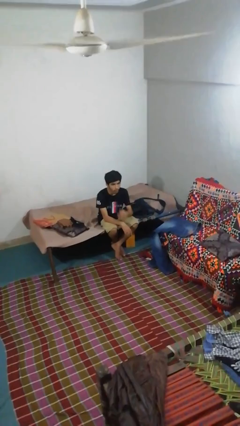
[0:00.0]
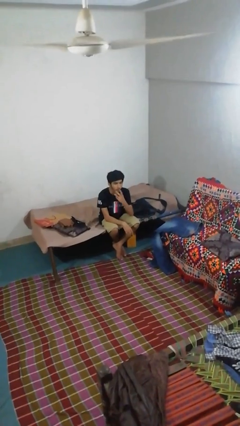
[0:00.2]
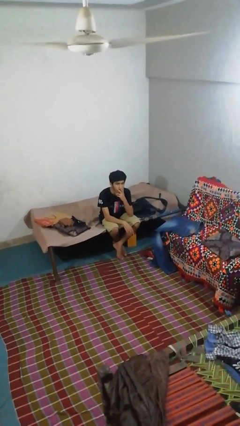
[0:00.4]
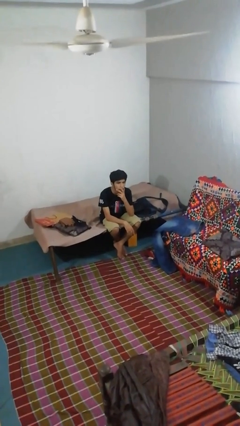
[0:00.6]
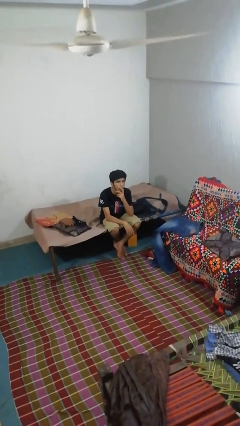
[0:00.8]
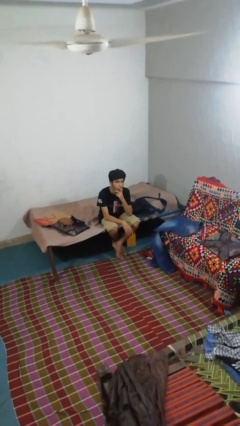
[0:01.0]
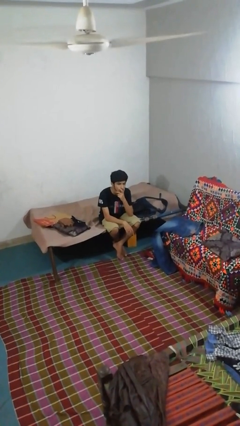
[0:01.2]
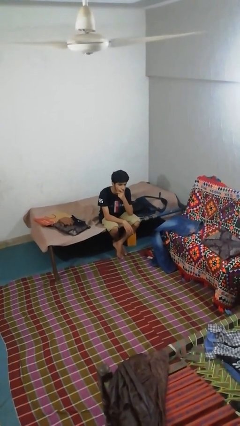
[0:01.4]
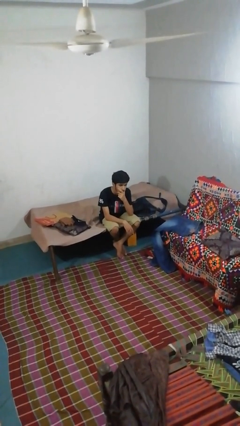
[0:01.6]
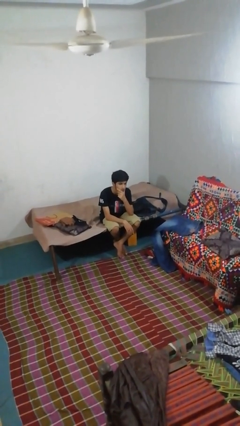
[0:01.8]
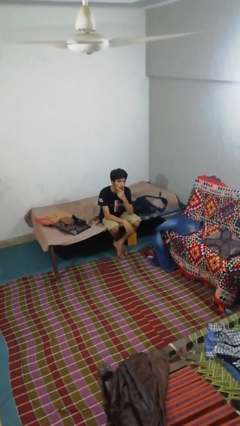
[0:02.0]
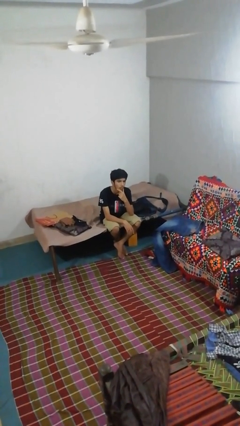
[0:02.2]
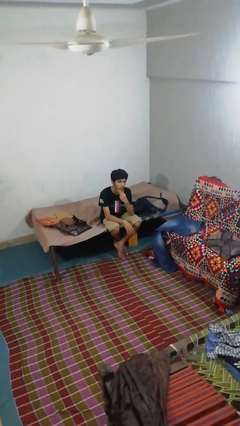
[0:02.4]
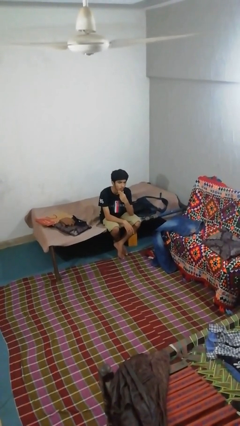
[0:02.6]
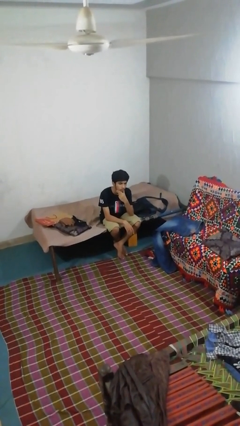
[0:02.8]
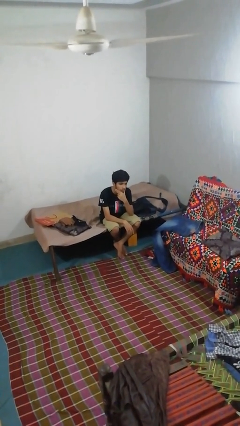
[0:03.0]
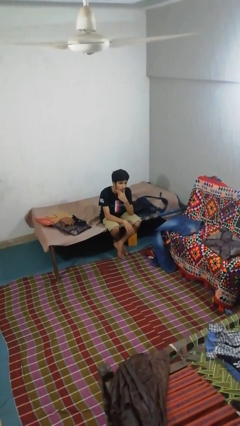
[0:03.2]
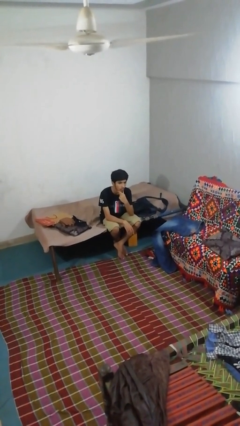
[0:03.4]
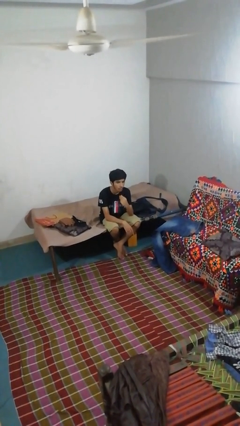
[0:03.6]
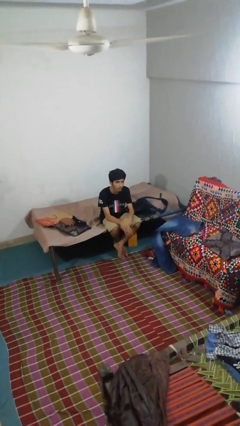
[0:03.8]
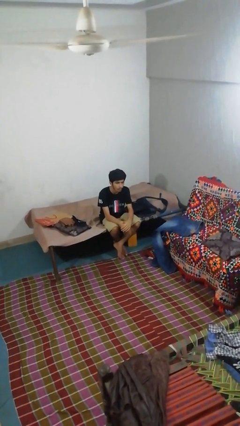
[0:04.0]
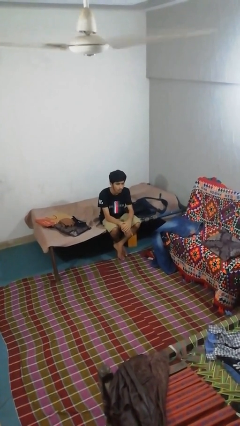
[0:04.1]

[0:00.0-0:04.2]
person strokes chin

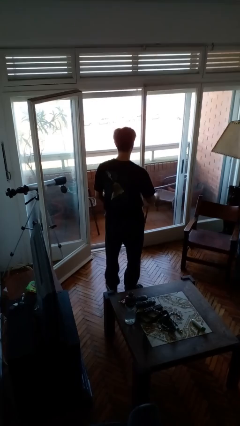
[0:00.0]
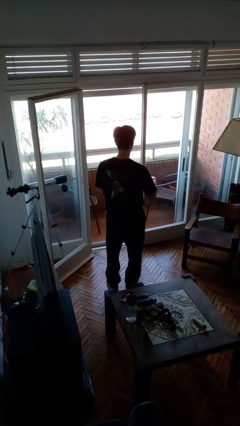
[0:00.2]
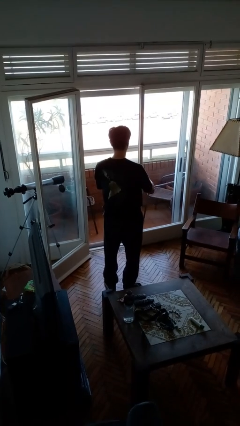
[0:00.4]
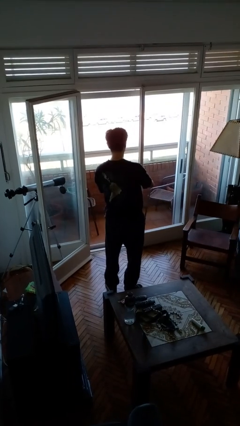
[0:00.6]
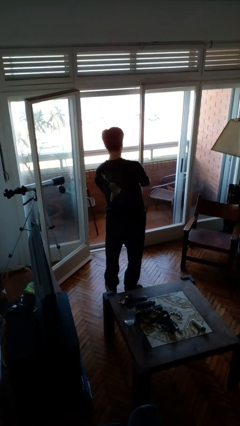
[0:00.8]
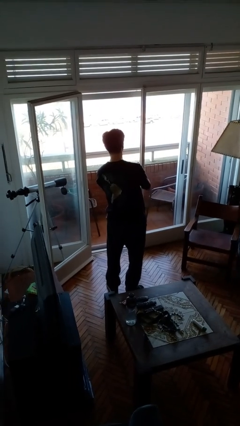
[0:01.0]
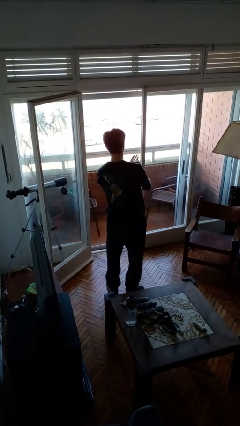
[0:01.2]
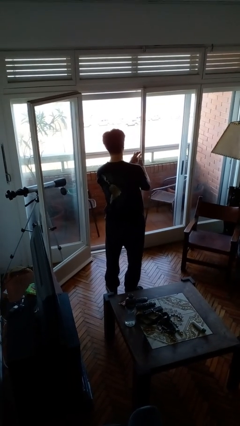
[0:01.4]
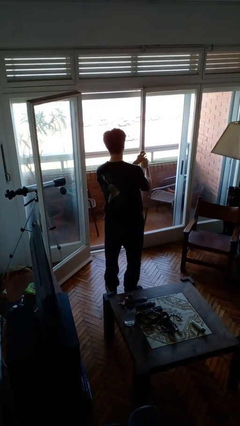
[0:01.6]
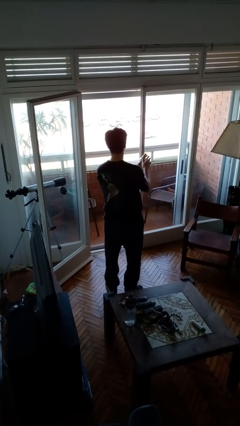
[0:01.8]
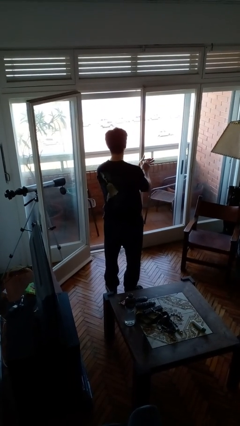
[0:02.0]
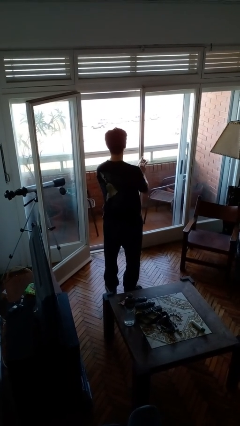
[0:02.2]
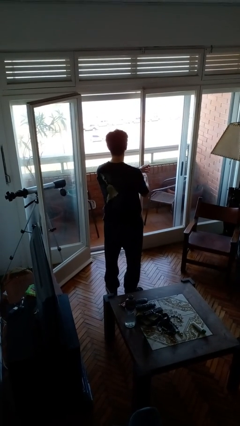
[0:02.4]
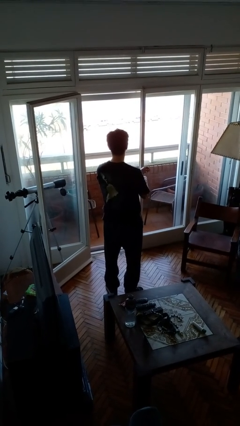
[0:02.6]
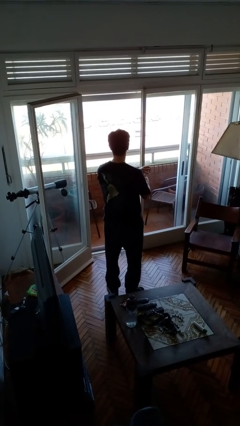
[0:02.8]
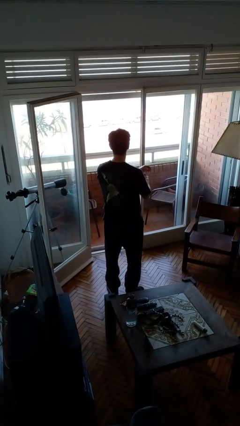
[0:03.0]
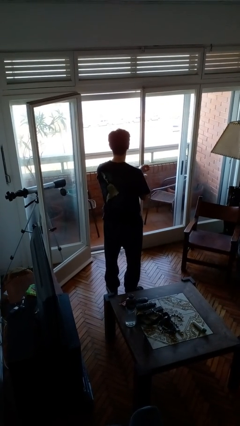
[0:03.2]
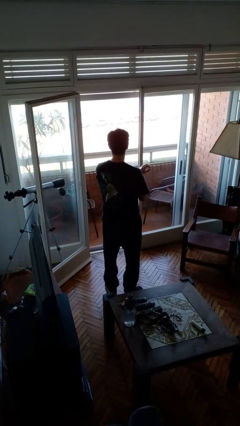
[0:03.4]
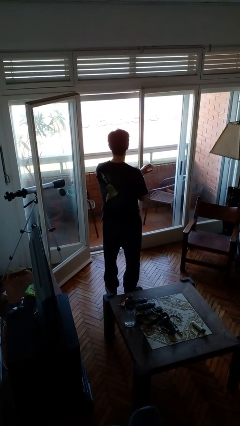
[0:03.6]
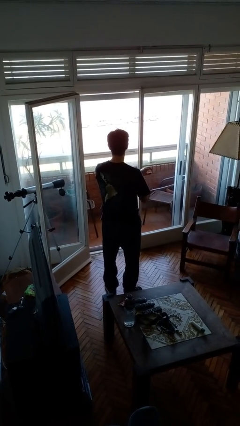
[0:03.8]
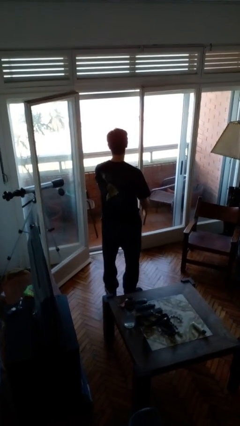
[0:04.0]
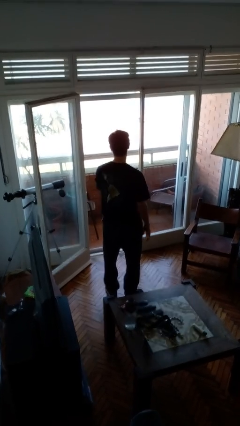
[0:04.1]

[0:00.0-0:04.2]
person puts on wristwatch

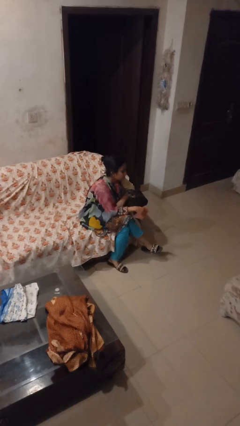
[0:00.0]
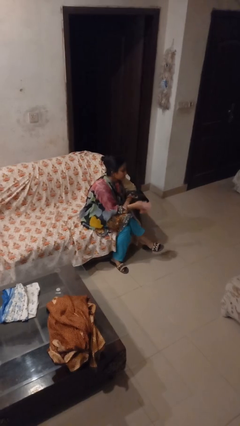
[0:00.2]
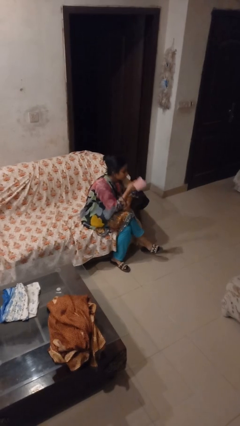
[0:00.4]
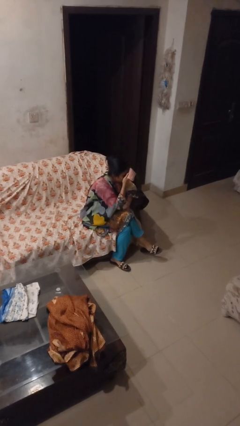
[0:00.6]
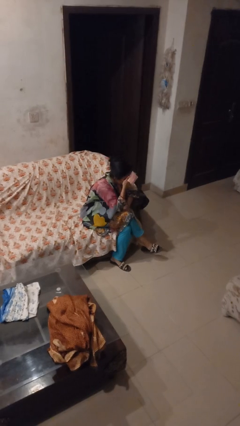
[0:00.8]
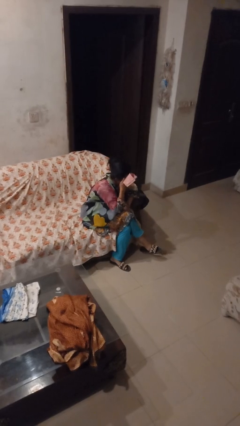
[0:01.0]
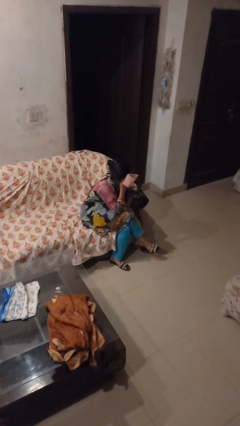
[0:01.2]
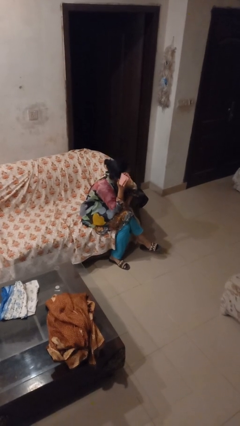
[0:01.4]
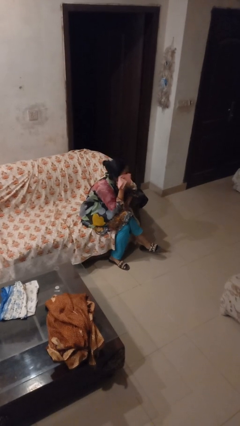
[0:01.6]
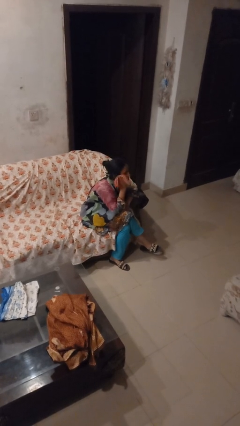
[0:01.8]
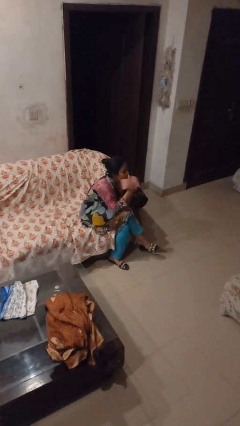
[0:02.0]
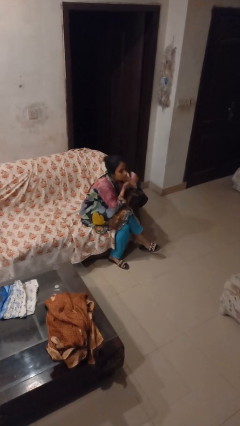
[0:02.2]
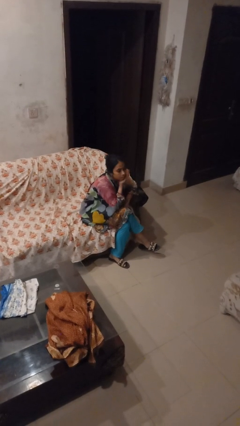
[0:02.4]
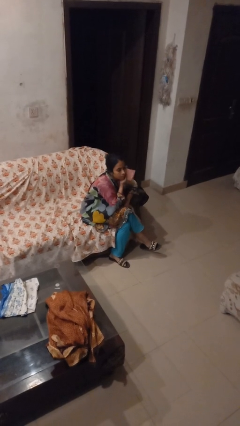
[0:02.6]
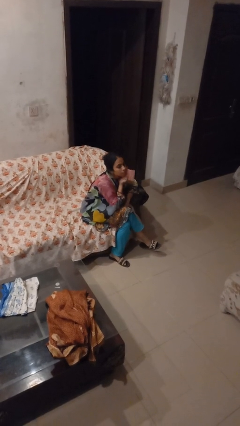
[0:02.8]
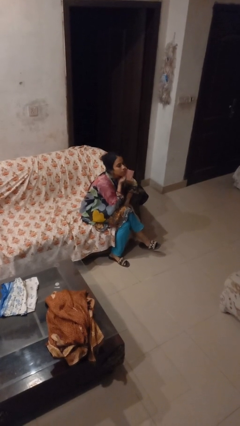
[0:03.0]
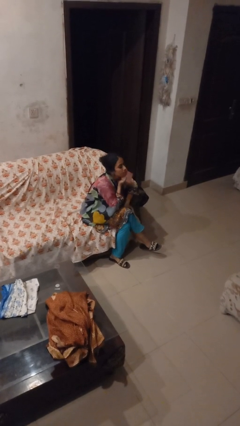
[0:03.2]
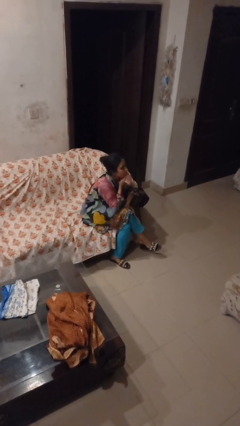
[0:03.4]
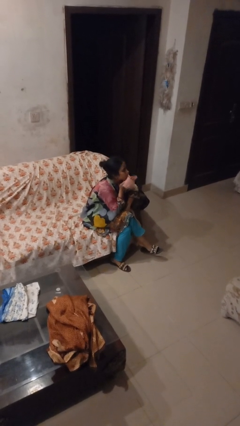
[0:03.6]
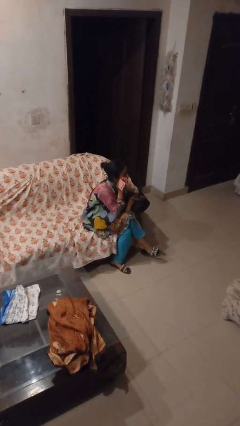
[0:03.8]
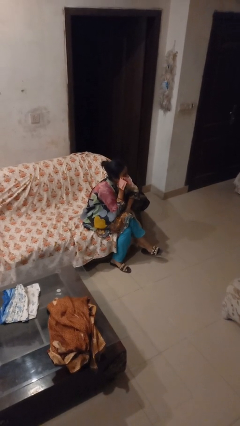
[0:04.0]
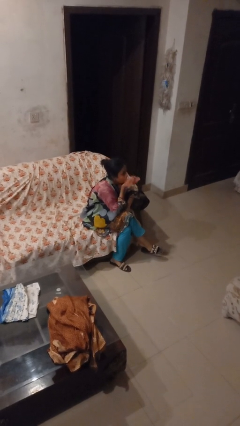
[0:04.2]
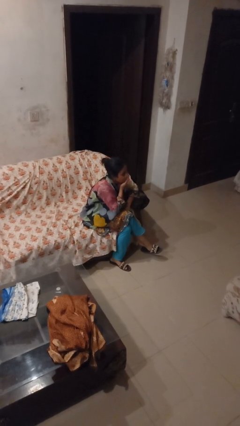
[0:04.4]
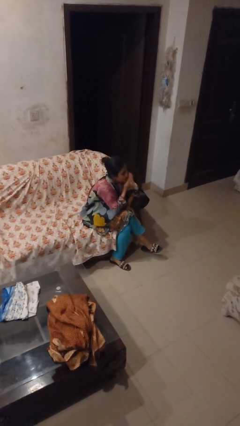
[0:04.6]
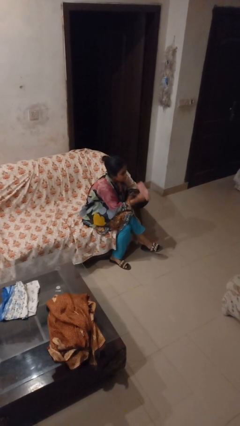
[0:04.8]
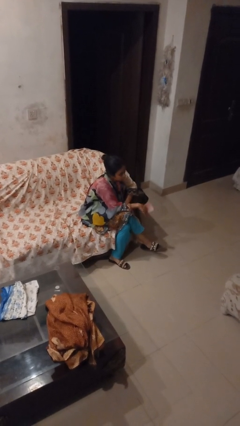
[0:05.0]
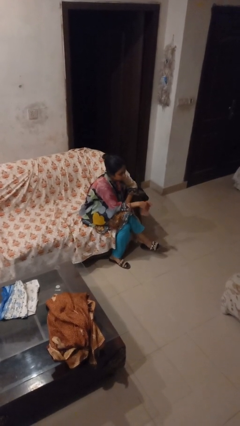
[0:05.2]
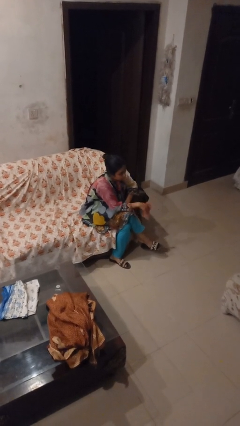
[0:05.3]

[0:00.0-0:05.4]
person wipes mouth with napkin

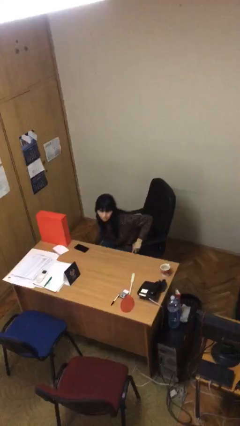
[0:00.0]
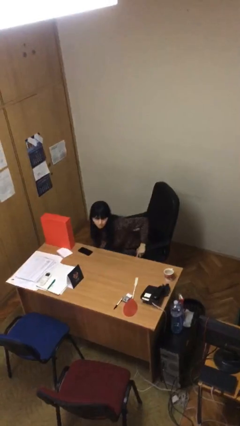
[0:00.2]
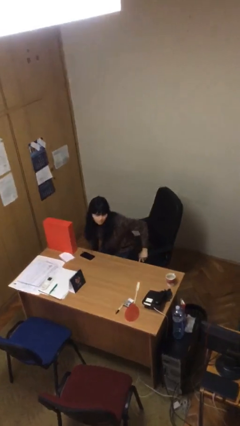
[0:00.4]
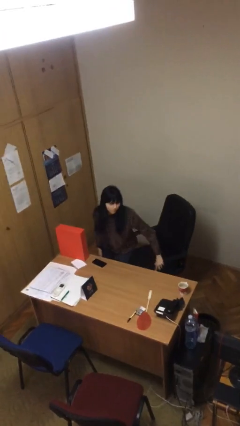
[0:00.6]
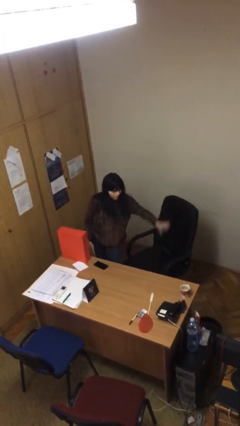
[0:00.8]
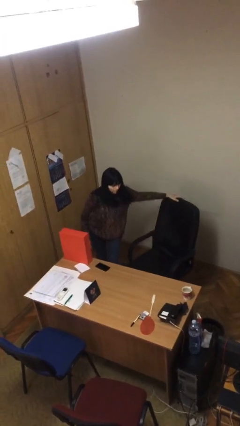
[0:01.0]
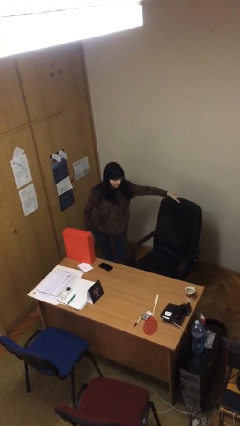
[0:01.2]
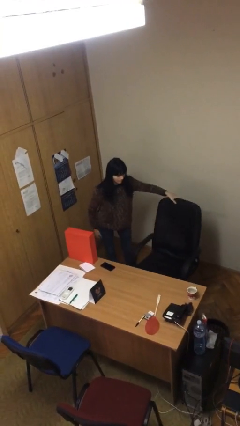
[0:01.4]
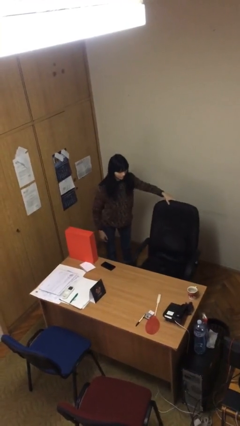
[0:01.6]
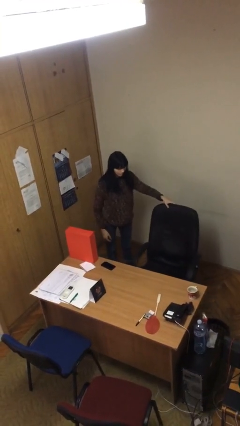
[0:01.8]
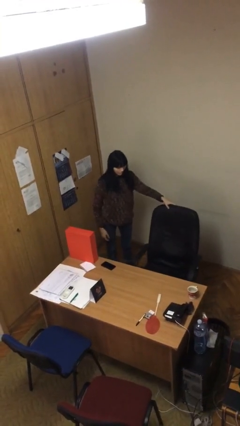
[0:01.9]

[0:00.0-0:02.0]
person stands up

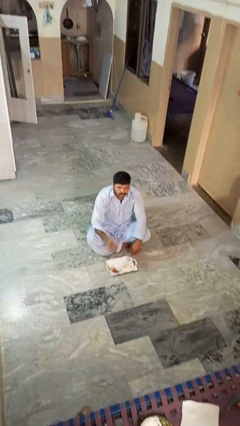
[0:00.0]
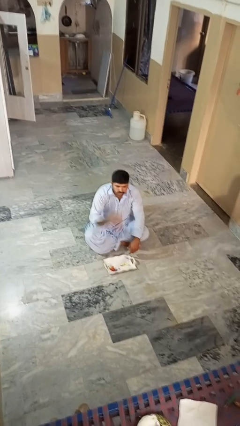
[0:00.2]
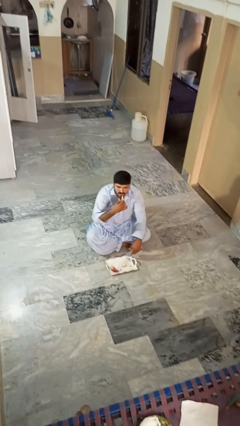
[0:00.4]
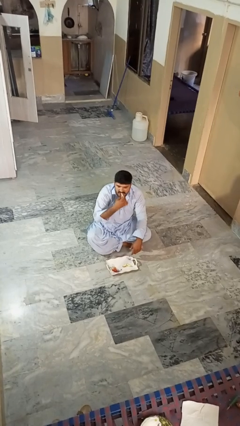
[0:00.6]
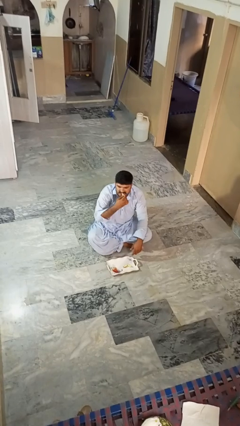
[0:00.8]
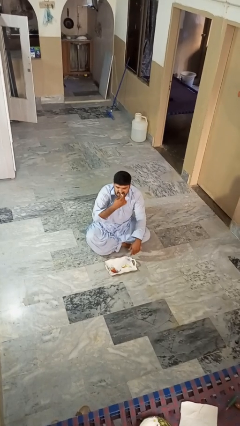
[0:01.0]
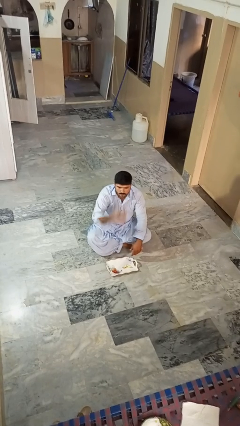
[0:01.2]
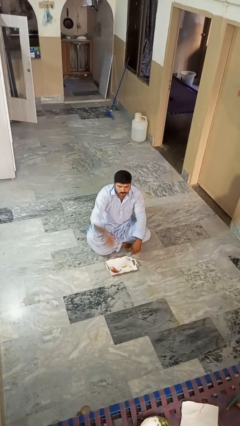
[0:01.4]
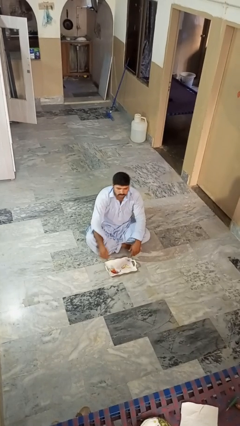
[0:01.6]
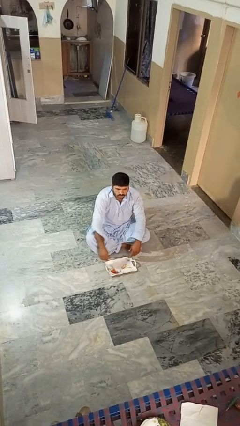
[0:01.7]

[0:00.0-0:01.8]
person eats apple
